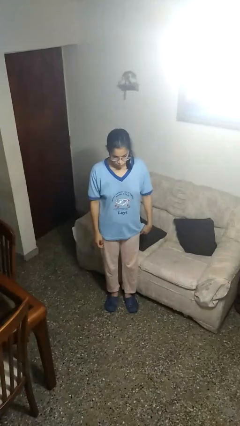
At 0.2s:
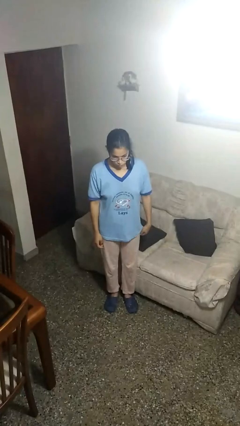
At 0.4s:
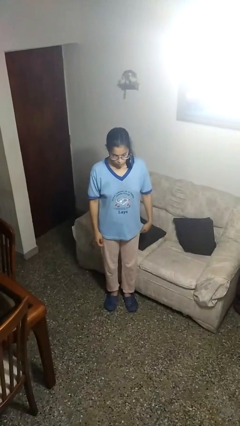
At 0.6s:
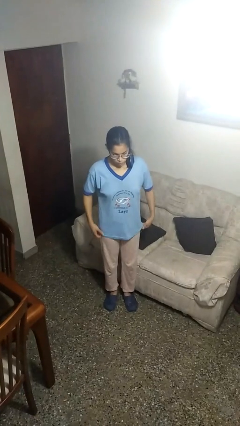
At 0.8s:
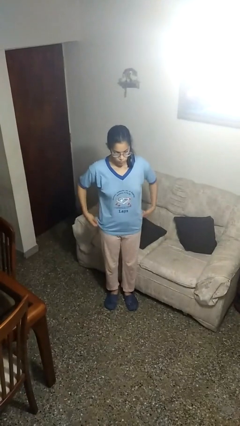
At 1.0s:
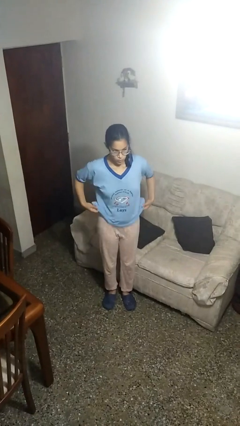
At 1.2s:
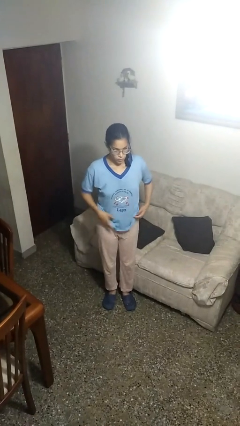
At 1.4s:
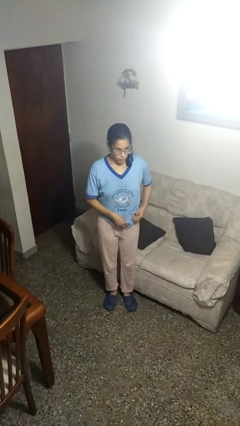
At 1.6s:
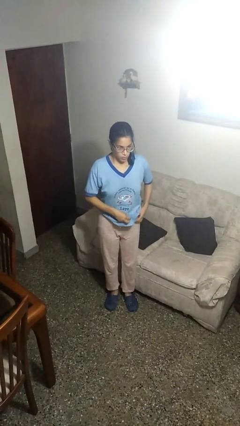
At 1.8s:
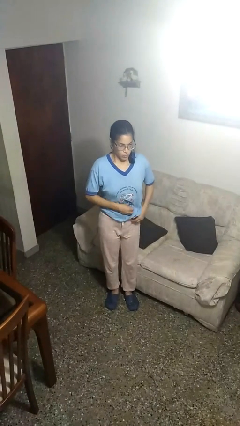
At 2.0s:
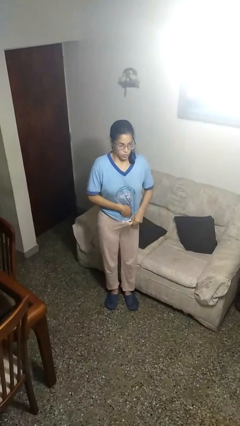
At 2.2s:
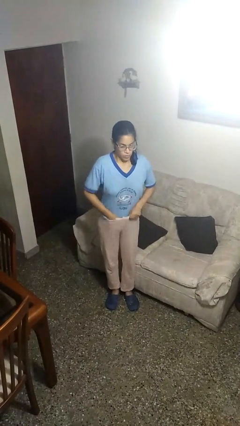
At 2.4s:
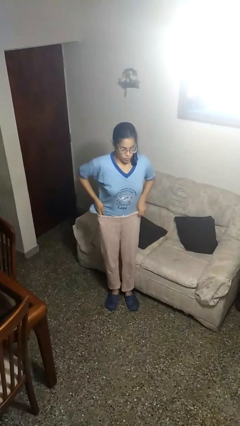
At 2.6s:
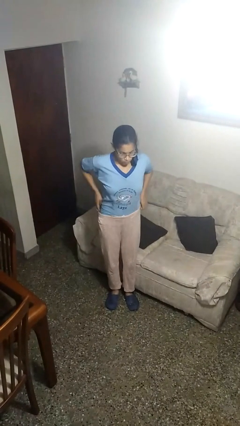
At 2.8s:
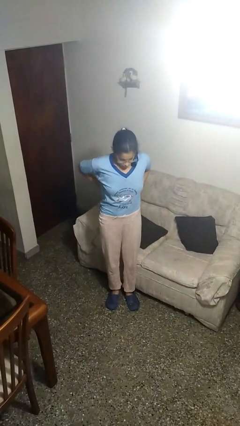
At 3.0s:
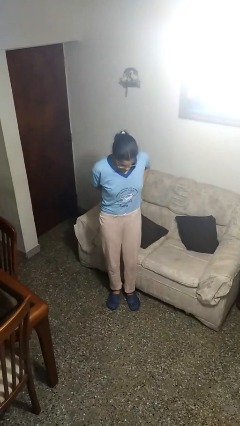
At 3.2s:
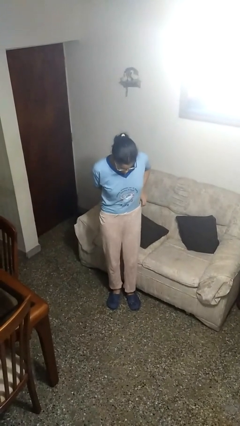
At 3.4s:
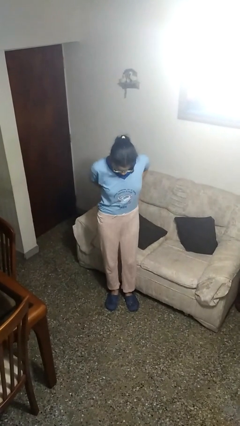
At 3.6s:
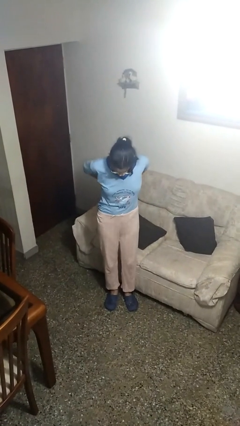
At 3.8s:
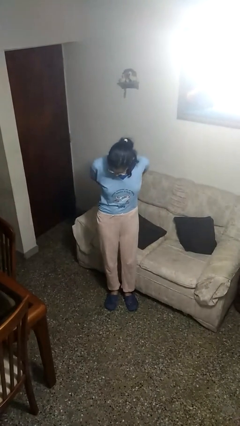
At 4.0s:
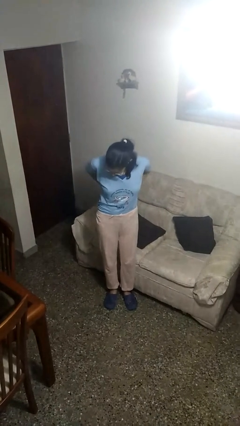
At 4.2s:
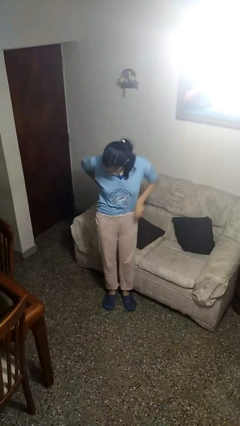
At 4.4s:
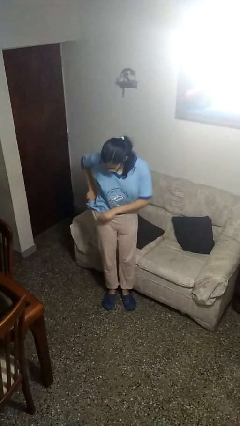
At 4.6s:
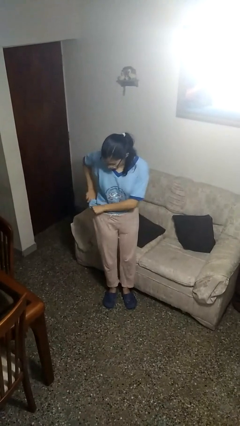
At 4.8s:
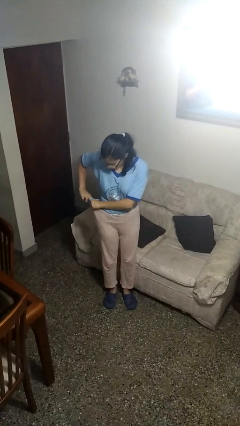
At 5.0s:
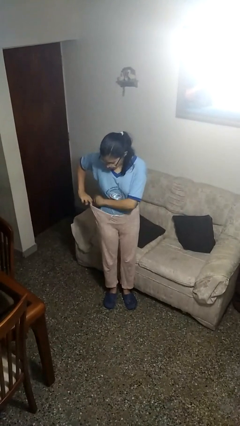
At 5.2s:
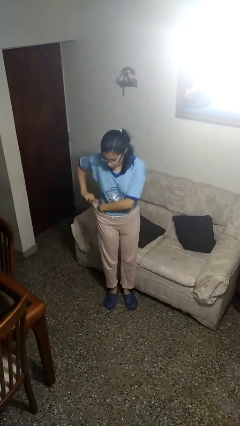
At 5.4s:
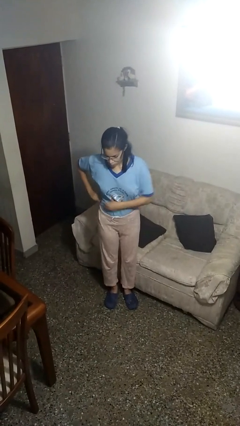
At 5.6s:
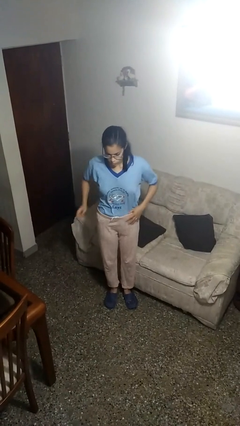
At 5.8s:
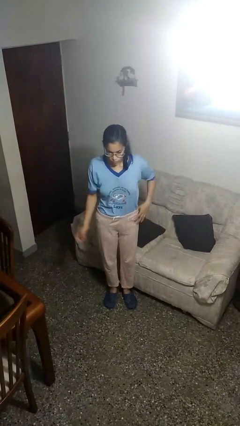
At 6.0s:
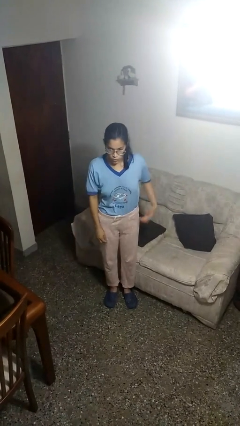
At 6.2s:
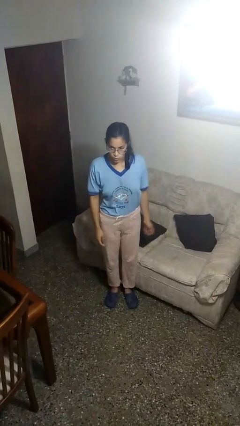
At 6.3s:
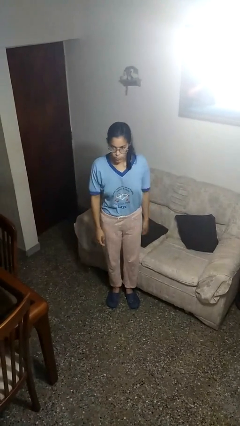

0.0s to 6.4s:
person tucks in shirt

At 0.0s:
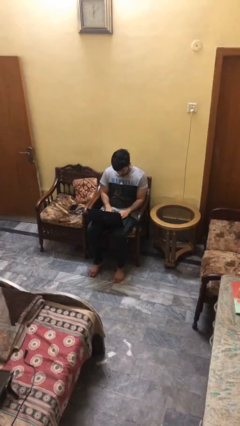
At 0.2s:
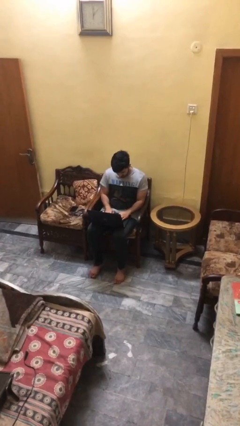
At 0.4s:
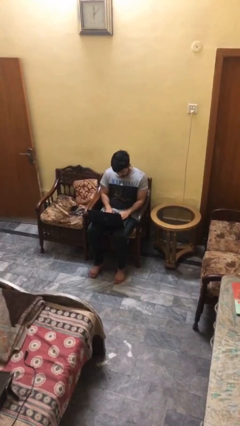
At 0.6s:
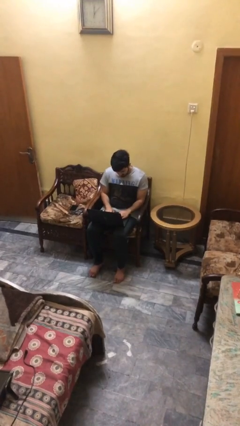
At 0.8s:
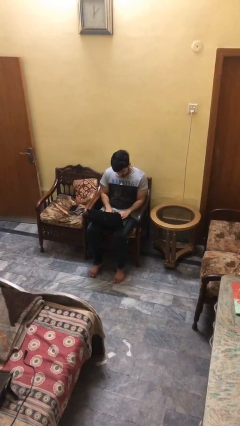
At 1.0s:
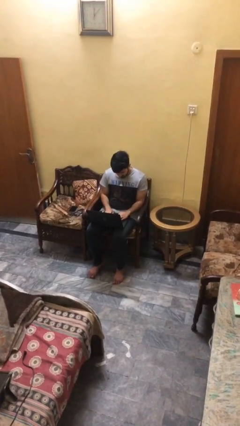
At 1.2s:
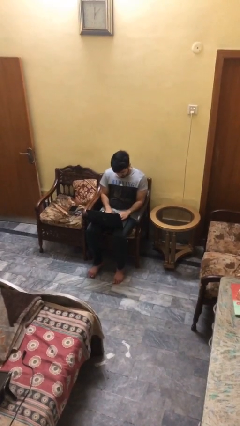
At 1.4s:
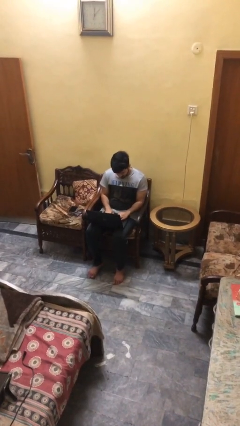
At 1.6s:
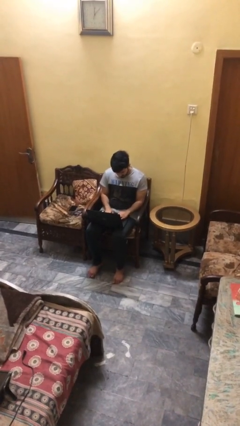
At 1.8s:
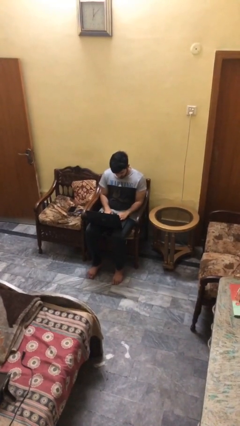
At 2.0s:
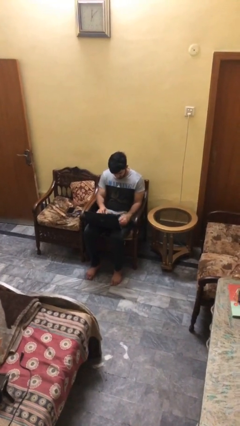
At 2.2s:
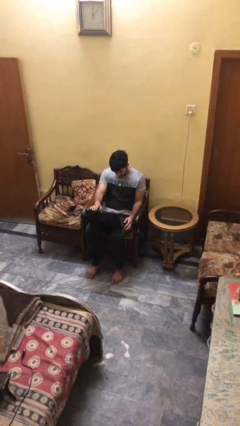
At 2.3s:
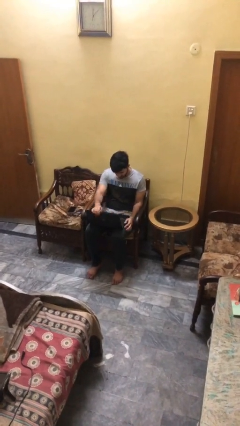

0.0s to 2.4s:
person interacts with laptop

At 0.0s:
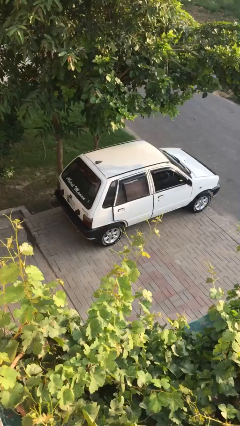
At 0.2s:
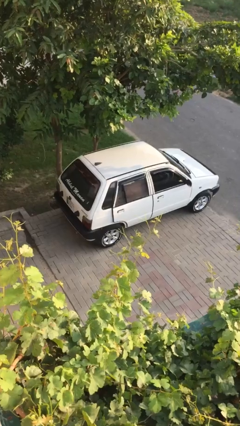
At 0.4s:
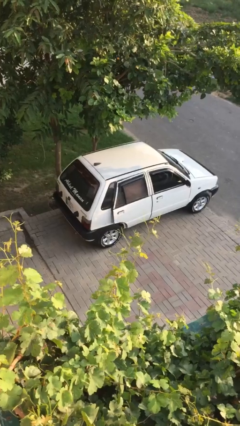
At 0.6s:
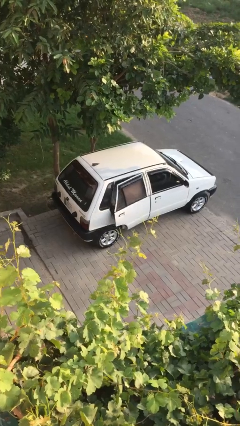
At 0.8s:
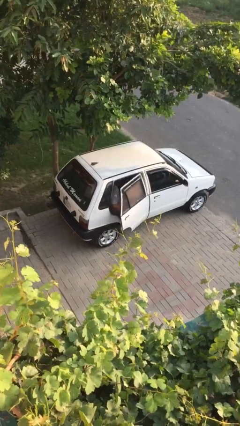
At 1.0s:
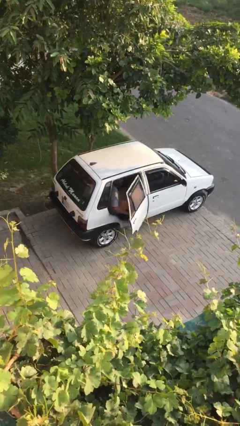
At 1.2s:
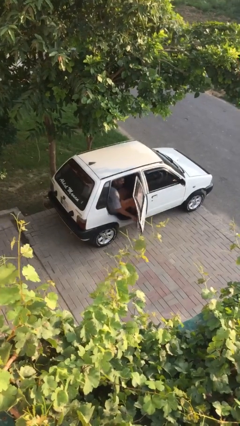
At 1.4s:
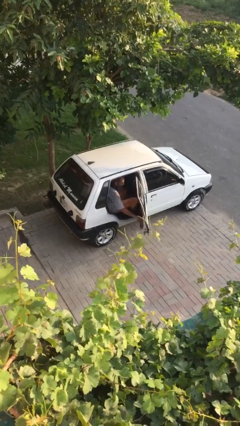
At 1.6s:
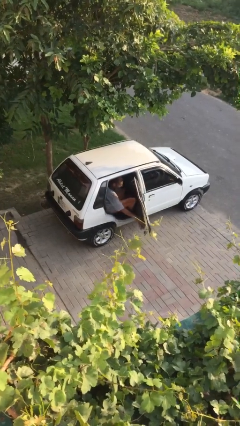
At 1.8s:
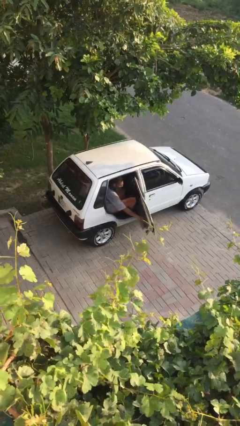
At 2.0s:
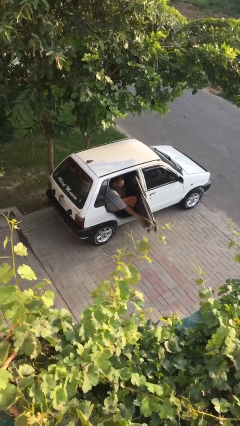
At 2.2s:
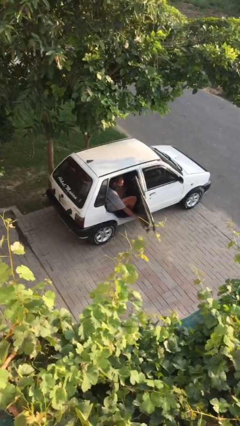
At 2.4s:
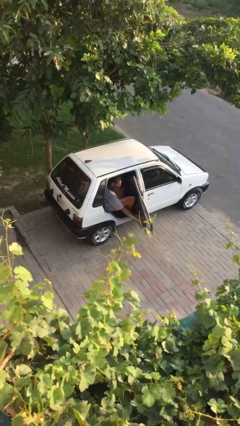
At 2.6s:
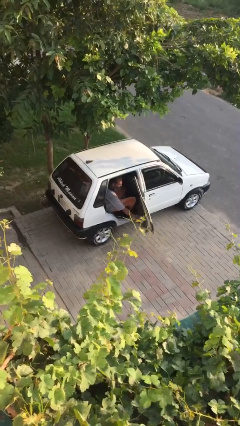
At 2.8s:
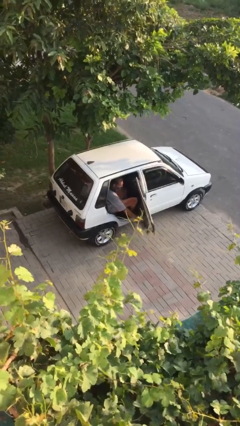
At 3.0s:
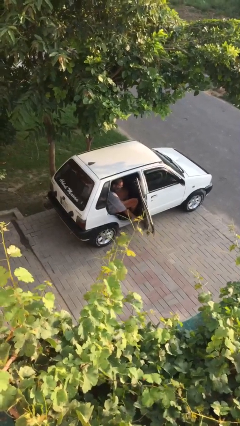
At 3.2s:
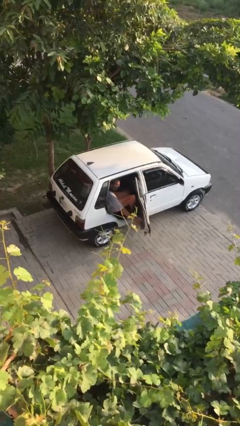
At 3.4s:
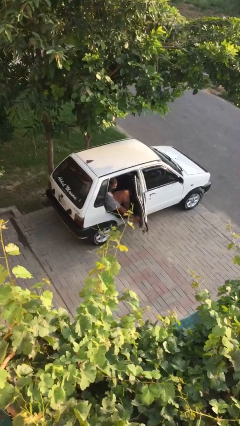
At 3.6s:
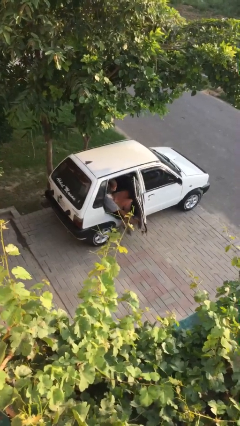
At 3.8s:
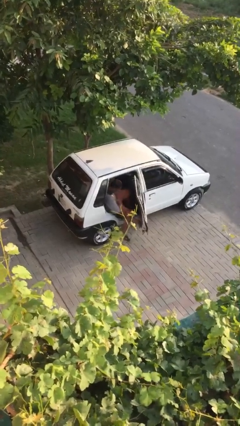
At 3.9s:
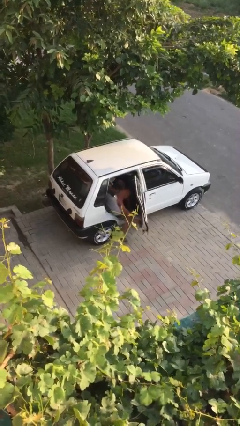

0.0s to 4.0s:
person opens car door

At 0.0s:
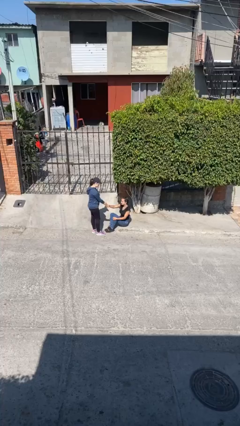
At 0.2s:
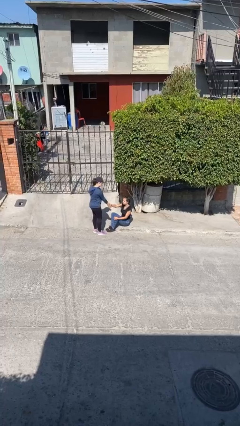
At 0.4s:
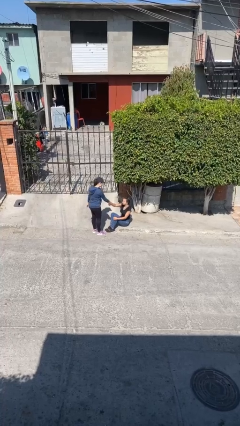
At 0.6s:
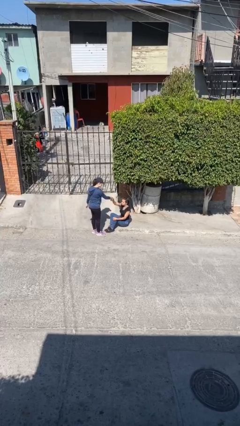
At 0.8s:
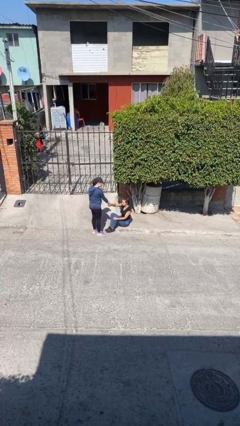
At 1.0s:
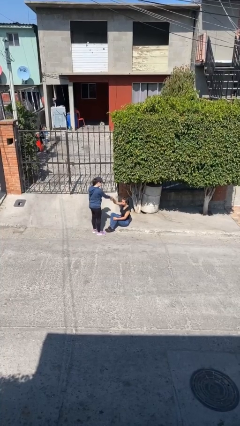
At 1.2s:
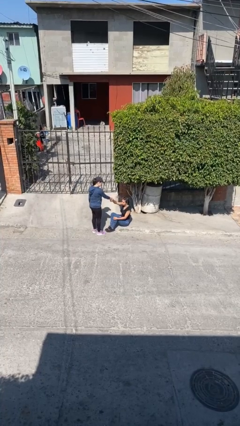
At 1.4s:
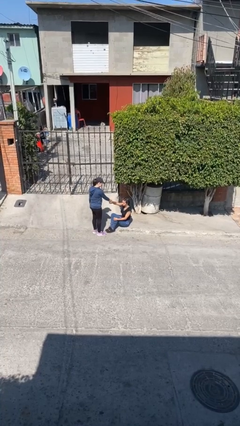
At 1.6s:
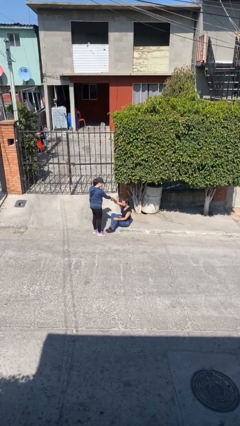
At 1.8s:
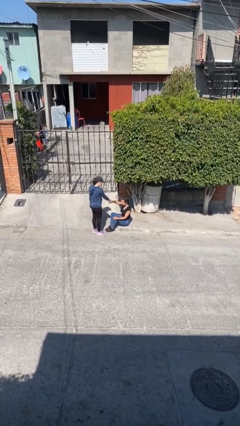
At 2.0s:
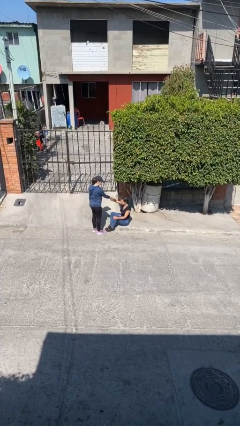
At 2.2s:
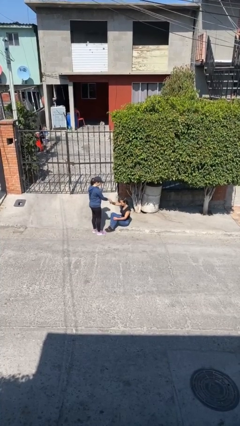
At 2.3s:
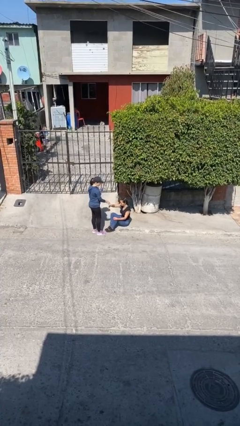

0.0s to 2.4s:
person shakes hand

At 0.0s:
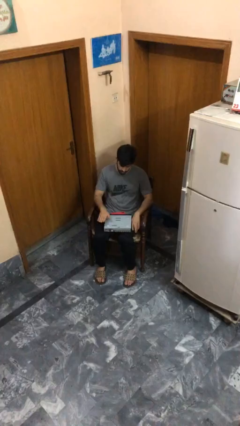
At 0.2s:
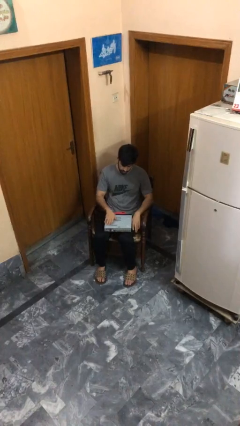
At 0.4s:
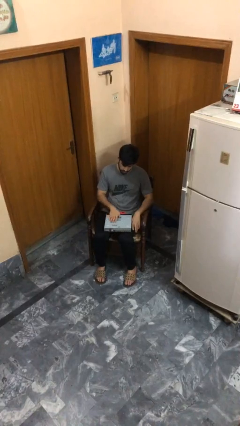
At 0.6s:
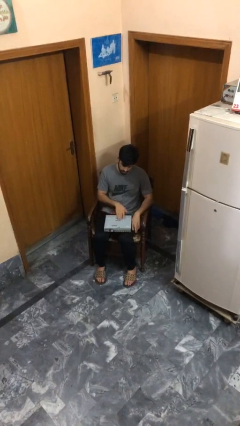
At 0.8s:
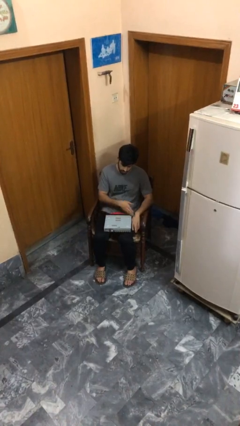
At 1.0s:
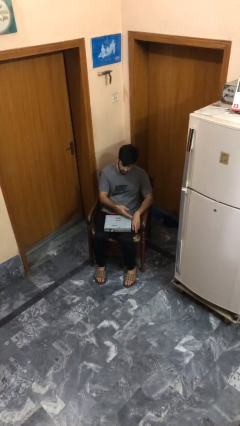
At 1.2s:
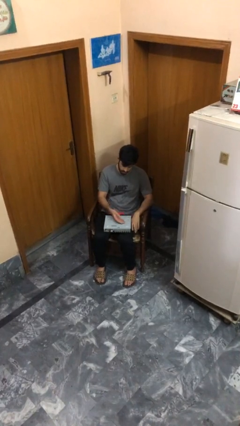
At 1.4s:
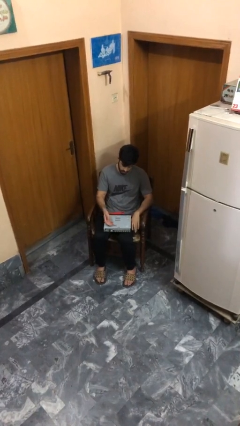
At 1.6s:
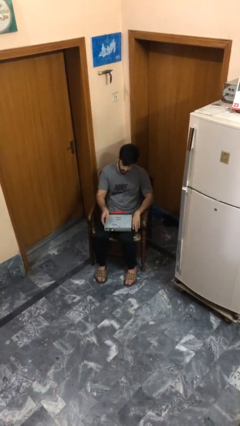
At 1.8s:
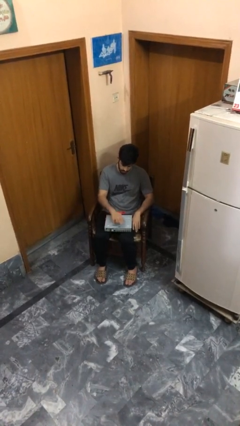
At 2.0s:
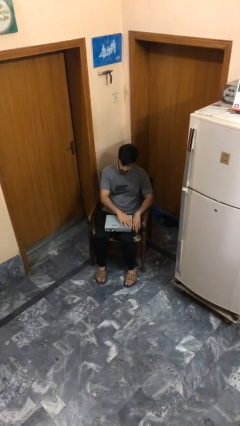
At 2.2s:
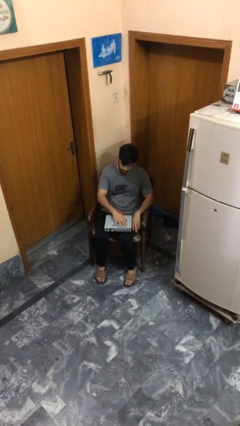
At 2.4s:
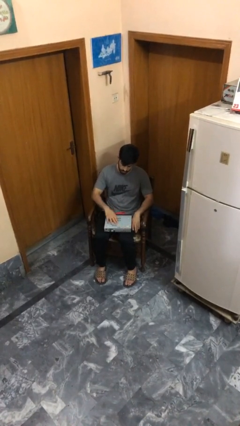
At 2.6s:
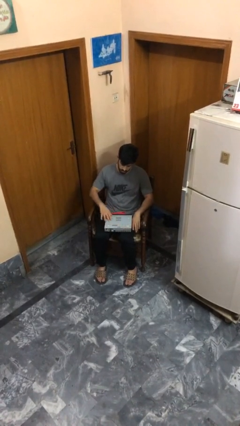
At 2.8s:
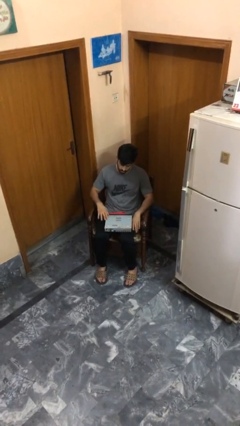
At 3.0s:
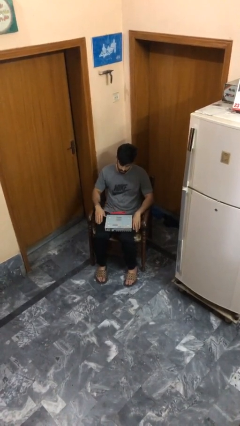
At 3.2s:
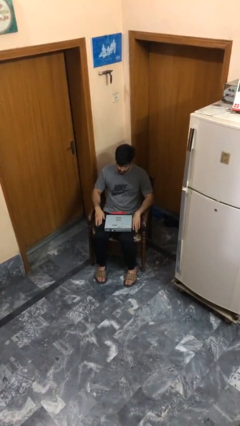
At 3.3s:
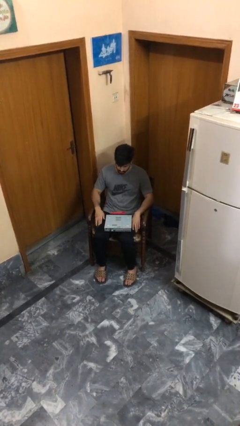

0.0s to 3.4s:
person waves hand over object
